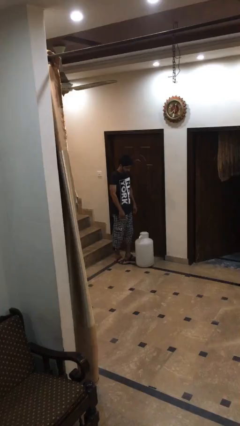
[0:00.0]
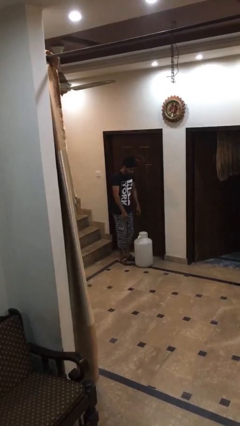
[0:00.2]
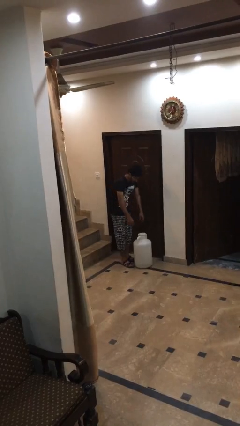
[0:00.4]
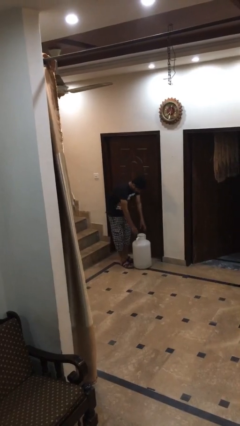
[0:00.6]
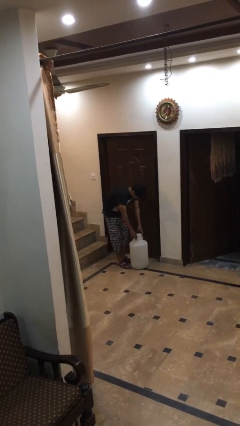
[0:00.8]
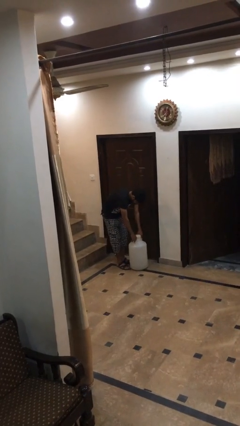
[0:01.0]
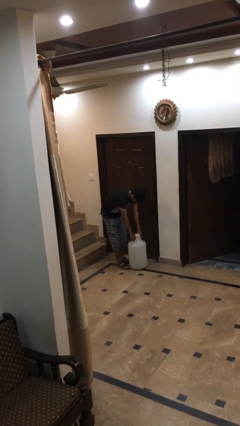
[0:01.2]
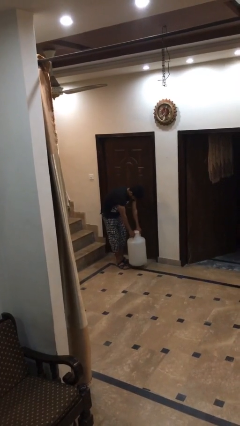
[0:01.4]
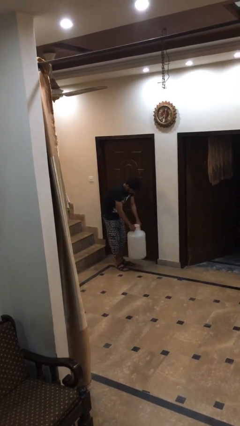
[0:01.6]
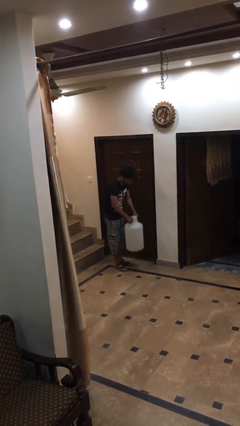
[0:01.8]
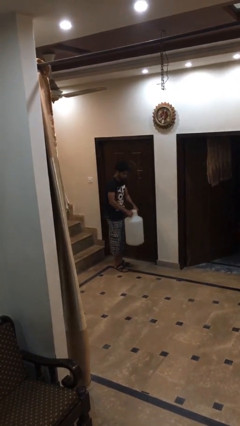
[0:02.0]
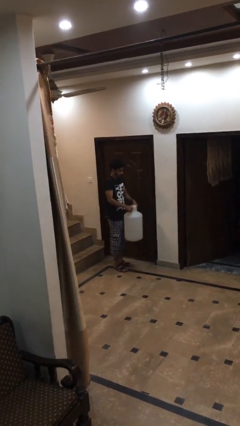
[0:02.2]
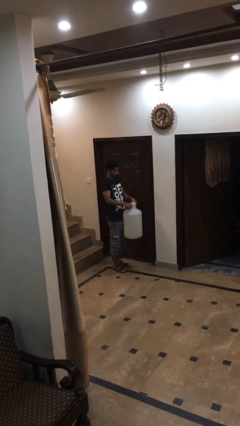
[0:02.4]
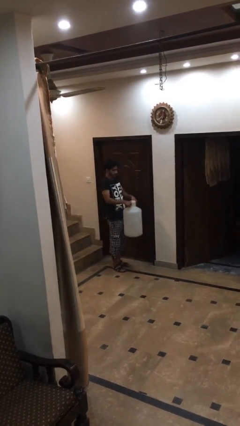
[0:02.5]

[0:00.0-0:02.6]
person picks up object from floor

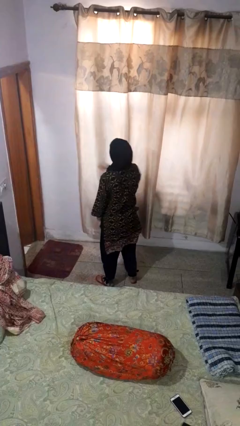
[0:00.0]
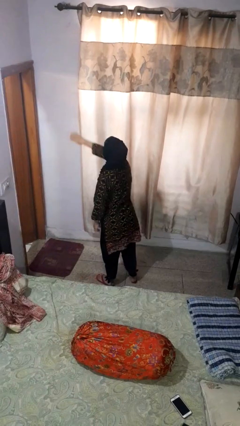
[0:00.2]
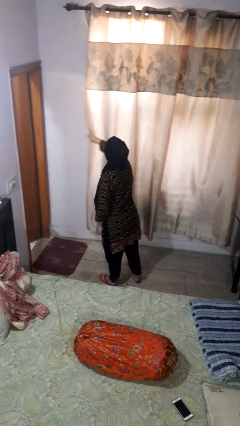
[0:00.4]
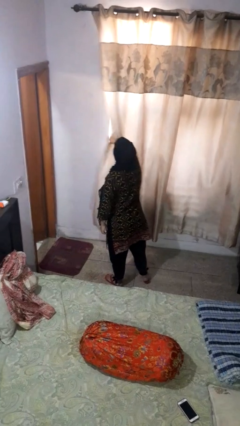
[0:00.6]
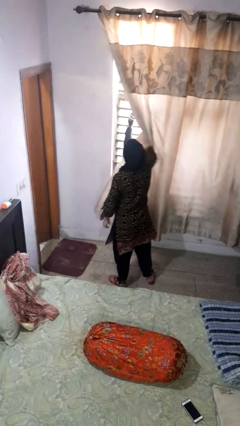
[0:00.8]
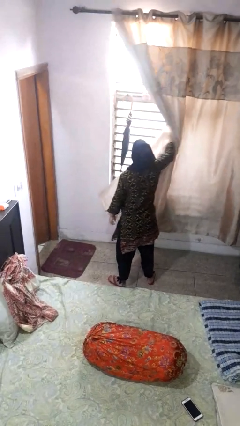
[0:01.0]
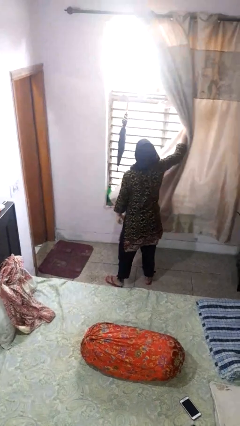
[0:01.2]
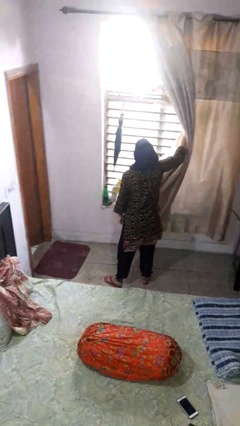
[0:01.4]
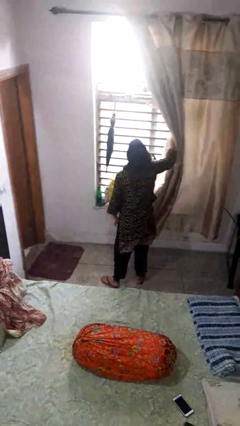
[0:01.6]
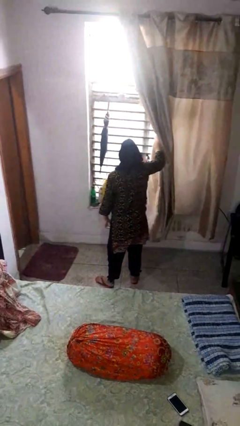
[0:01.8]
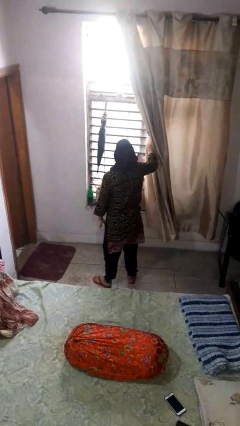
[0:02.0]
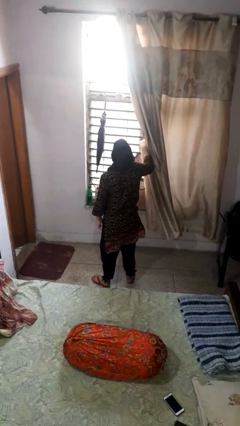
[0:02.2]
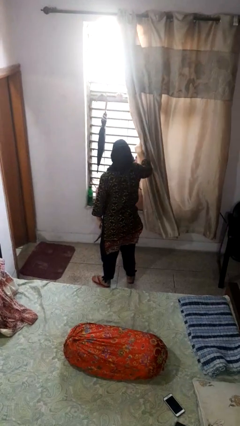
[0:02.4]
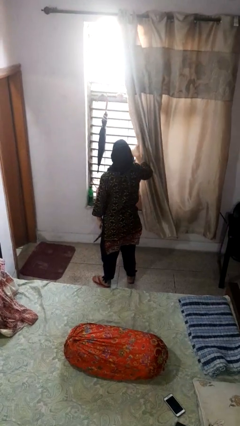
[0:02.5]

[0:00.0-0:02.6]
person opens curtains

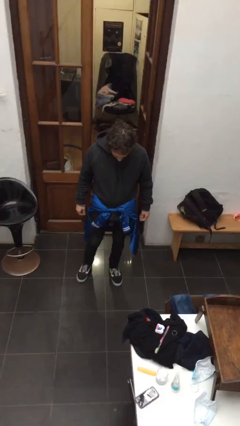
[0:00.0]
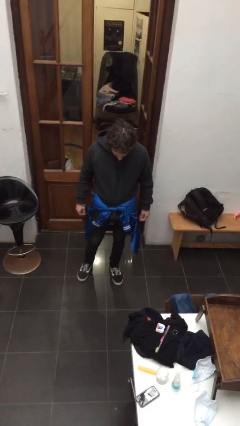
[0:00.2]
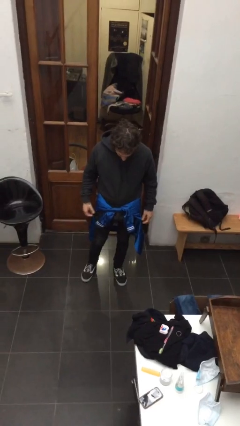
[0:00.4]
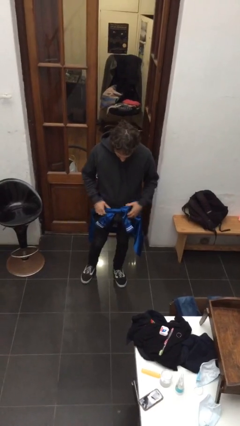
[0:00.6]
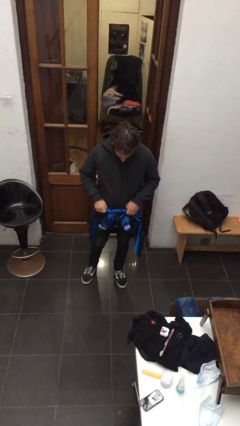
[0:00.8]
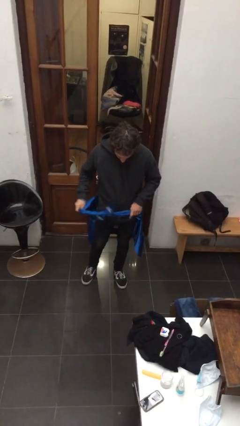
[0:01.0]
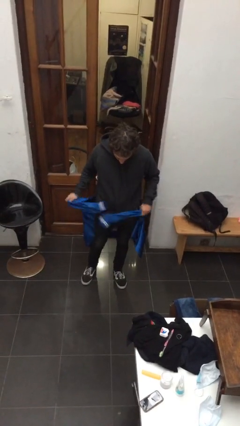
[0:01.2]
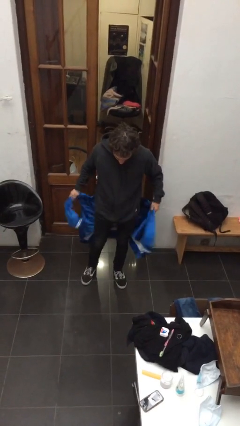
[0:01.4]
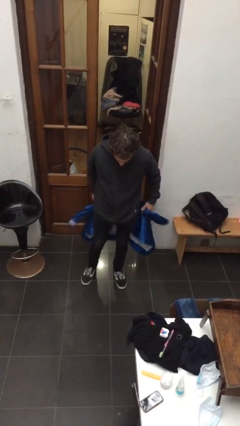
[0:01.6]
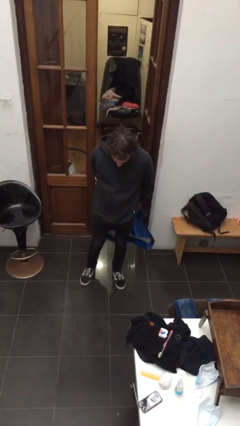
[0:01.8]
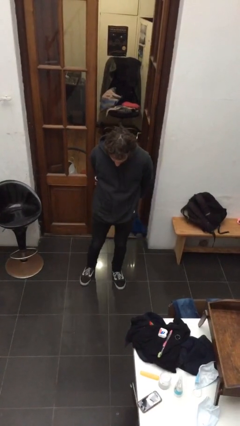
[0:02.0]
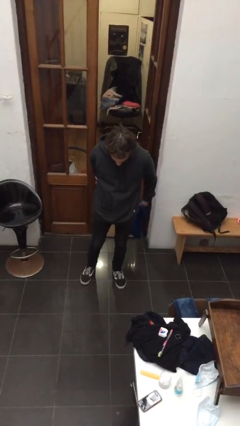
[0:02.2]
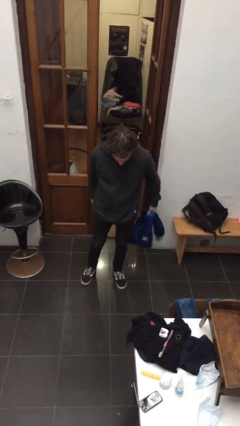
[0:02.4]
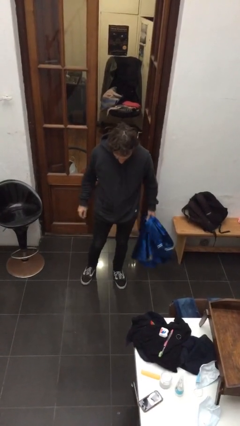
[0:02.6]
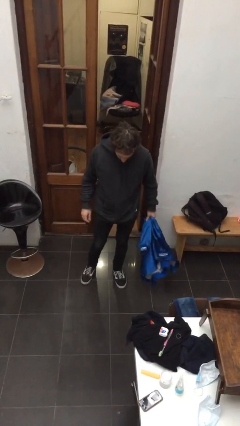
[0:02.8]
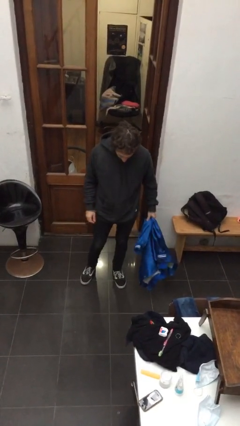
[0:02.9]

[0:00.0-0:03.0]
person unties jacket around waist

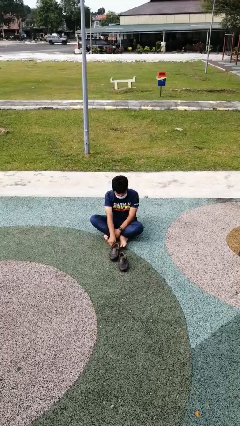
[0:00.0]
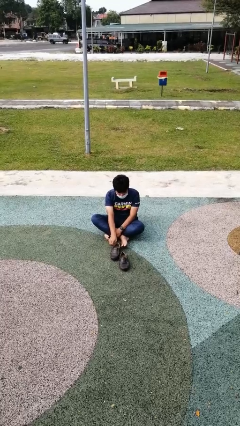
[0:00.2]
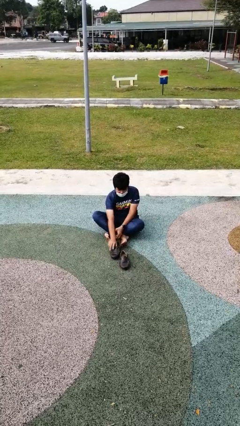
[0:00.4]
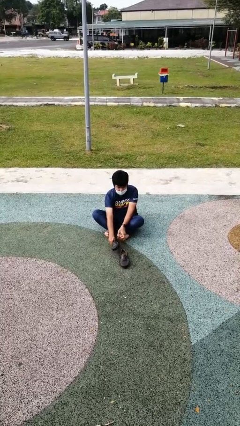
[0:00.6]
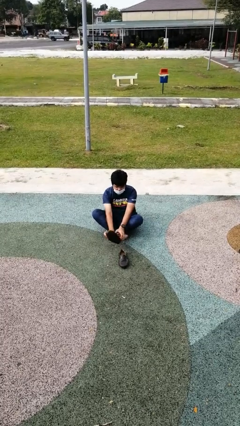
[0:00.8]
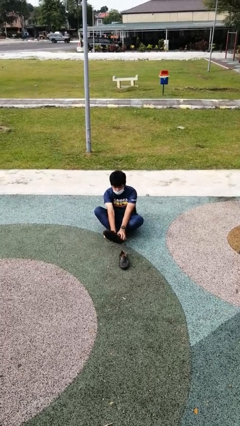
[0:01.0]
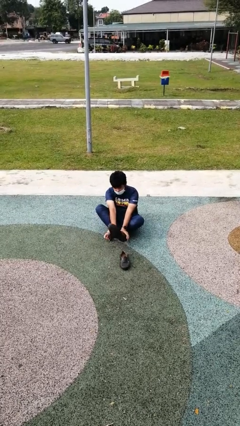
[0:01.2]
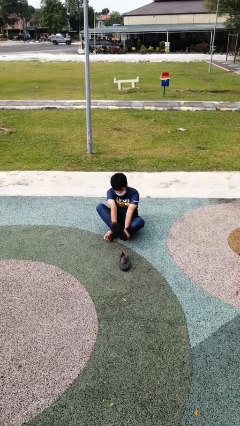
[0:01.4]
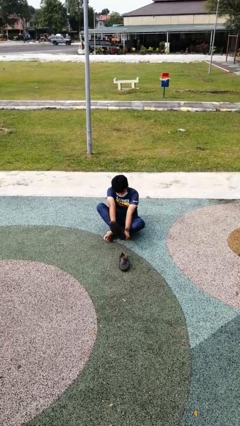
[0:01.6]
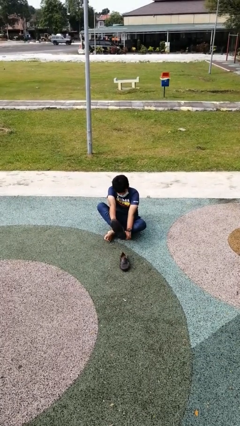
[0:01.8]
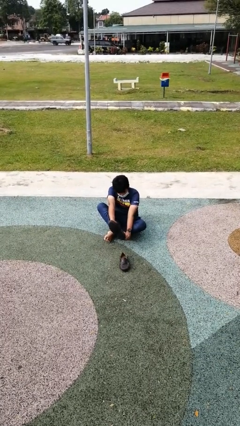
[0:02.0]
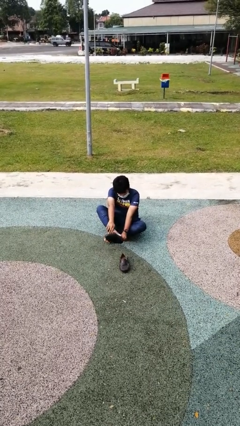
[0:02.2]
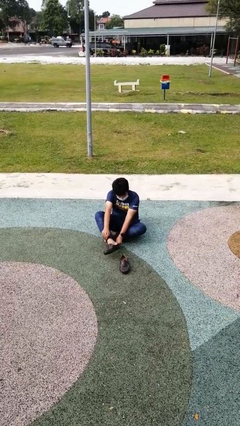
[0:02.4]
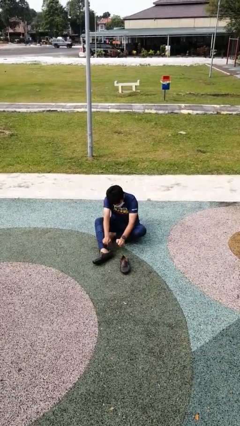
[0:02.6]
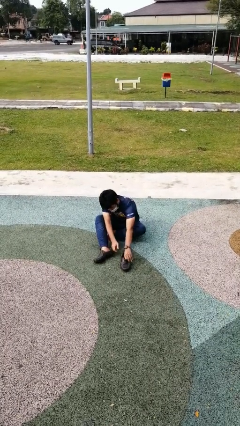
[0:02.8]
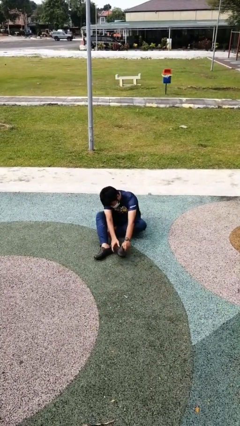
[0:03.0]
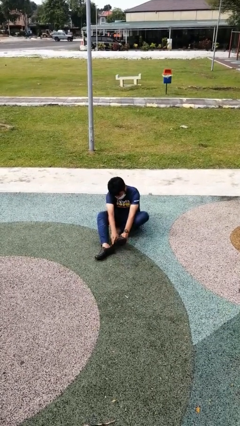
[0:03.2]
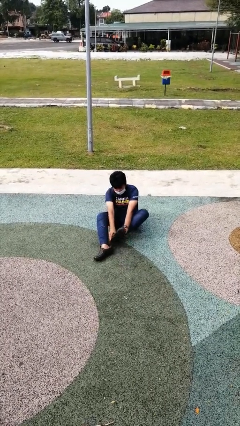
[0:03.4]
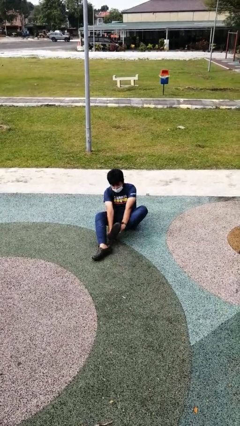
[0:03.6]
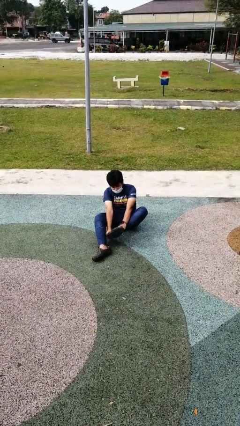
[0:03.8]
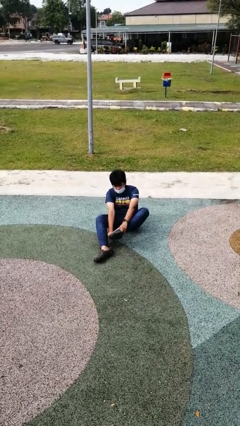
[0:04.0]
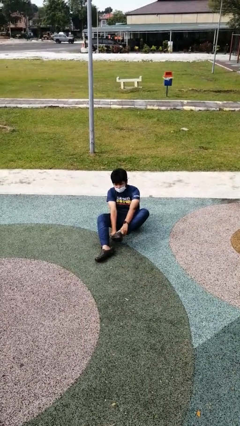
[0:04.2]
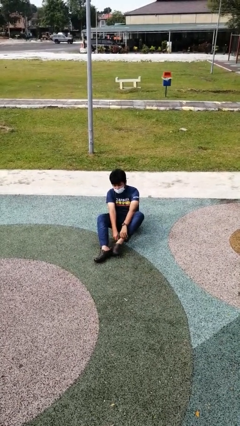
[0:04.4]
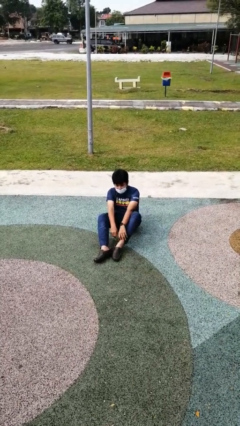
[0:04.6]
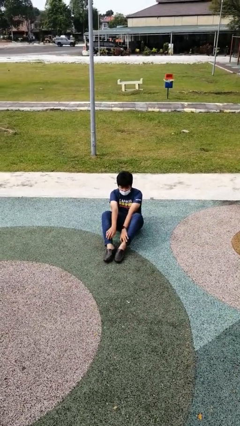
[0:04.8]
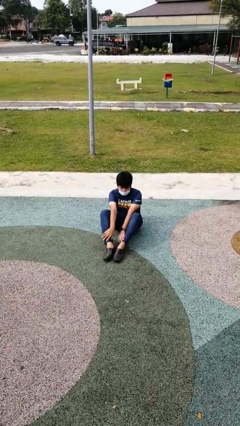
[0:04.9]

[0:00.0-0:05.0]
person puts on shoes

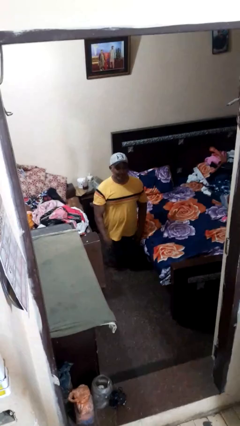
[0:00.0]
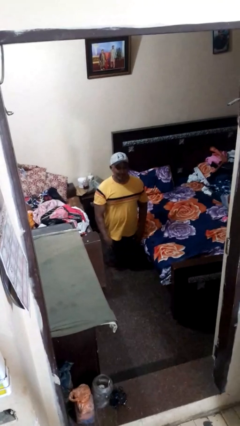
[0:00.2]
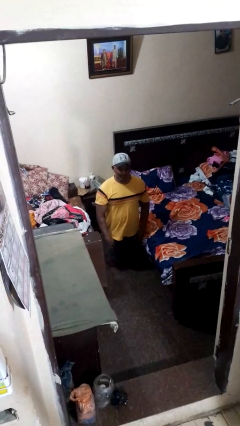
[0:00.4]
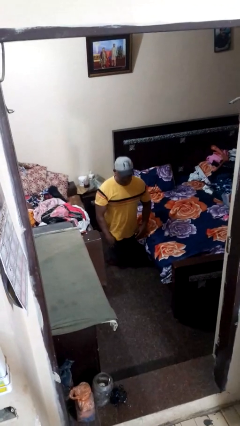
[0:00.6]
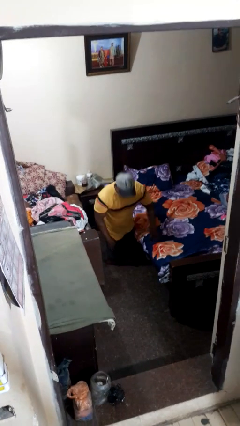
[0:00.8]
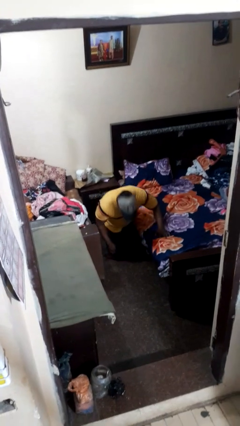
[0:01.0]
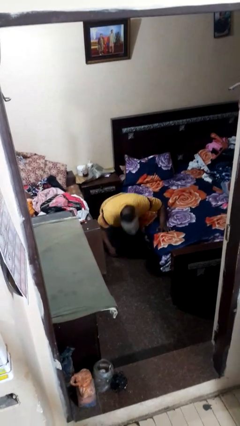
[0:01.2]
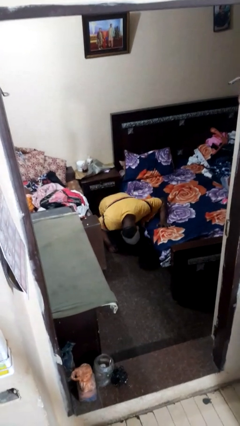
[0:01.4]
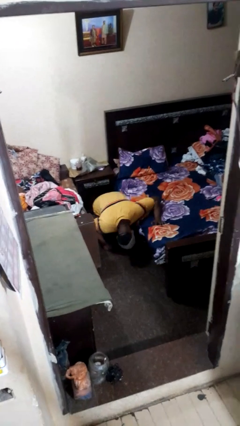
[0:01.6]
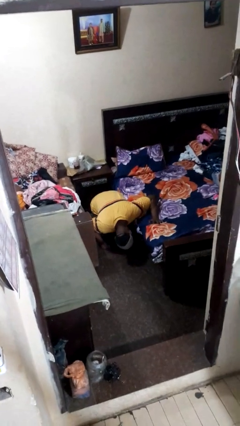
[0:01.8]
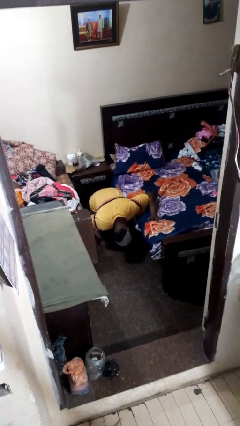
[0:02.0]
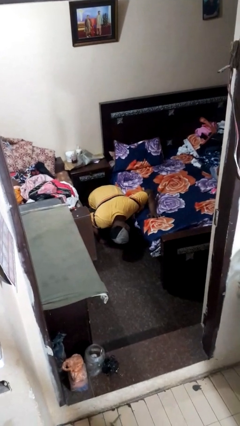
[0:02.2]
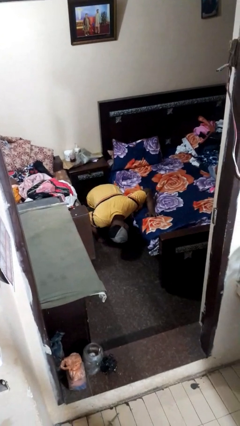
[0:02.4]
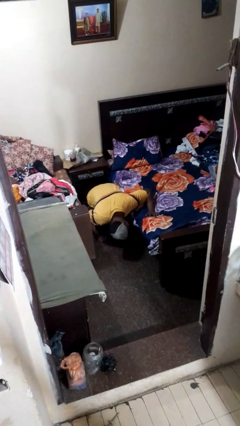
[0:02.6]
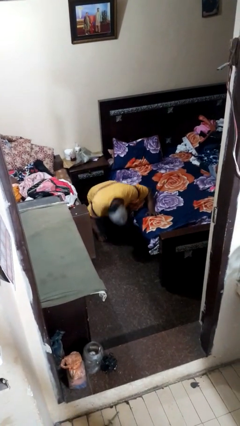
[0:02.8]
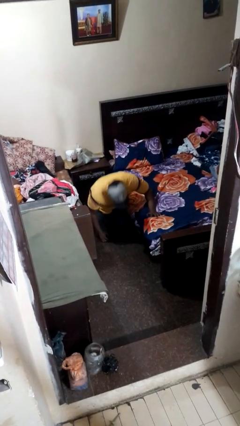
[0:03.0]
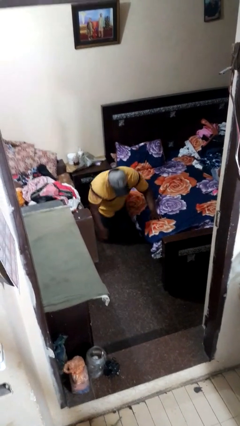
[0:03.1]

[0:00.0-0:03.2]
person searches under bed

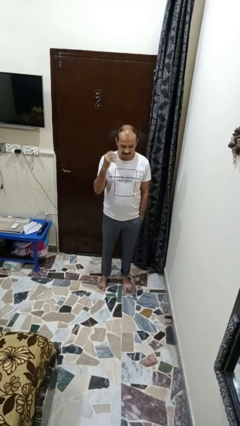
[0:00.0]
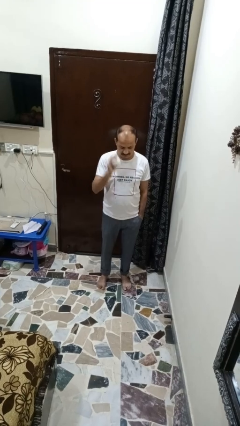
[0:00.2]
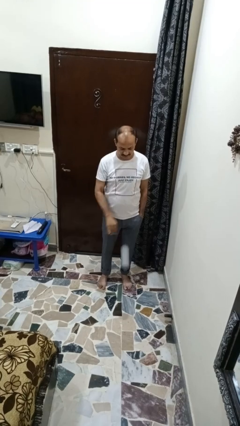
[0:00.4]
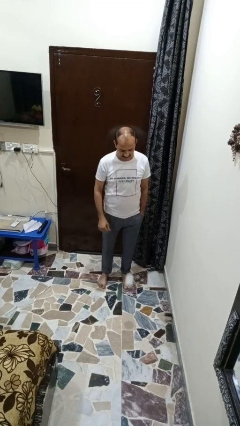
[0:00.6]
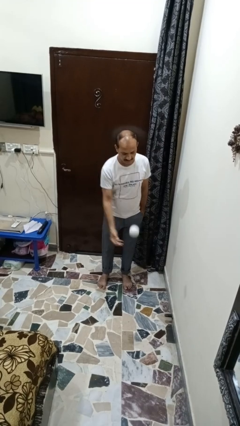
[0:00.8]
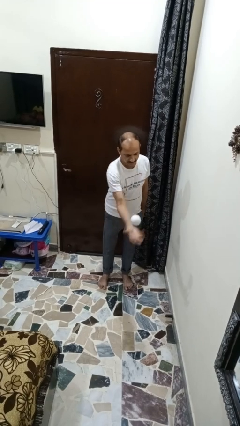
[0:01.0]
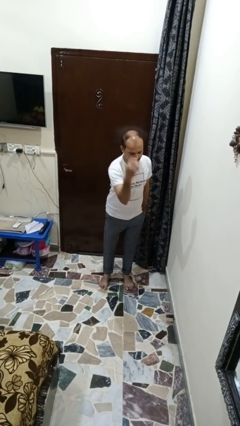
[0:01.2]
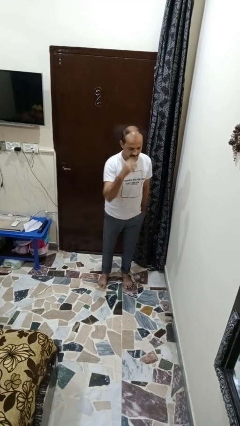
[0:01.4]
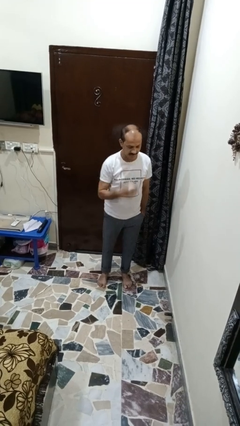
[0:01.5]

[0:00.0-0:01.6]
person bounces ball on floor
